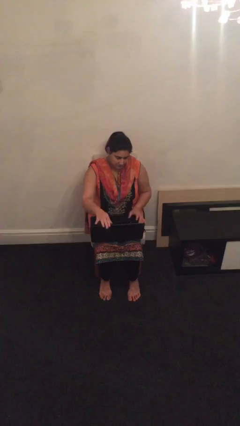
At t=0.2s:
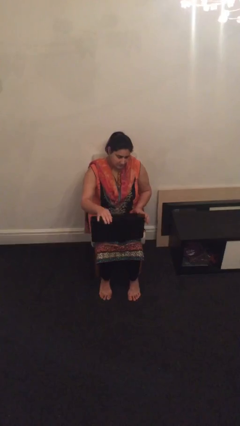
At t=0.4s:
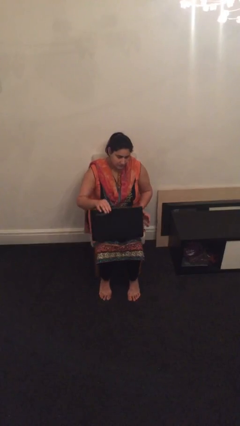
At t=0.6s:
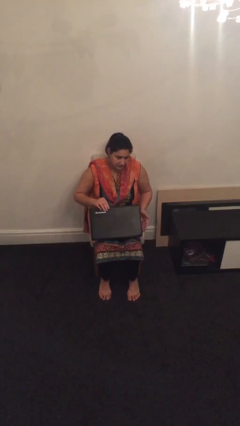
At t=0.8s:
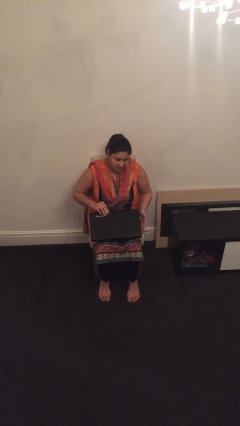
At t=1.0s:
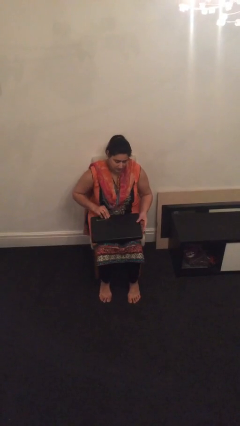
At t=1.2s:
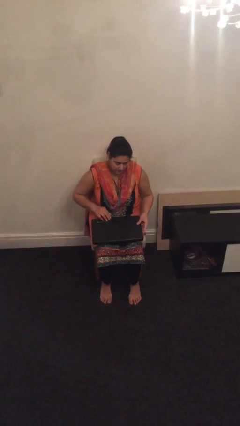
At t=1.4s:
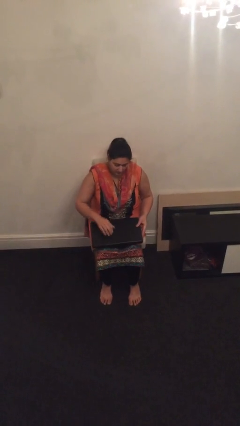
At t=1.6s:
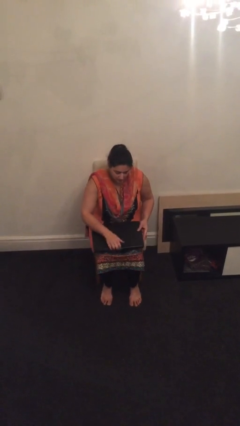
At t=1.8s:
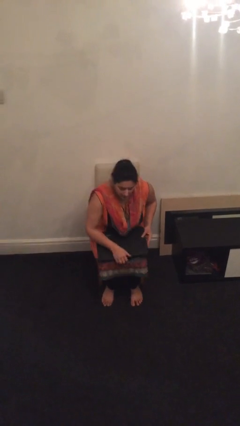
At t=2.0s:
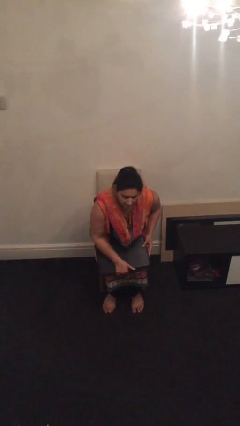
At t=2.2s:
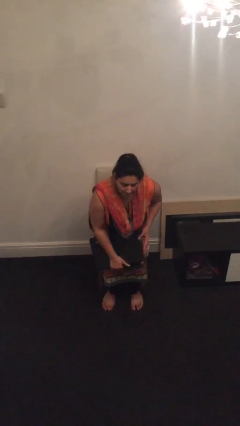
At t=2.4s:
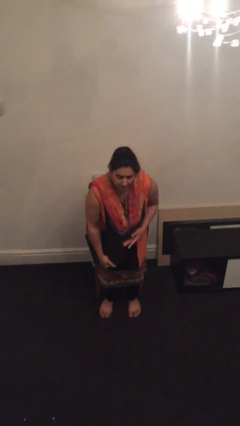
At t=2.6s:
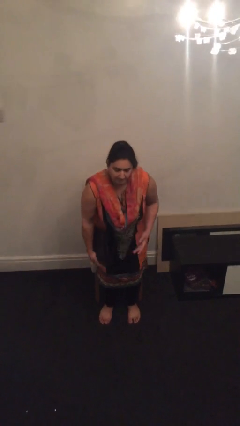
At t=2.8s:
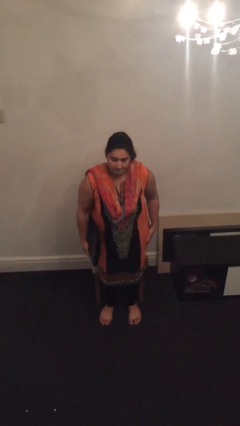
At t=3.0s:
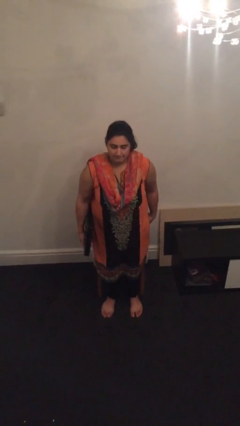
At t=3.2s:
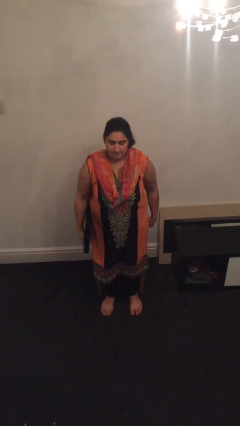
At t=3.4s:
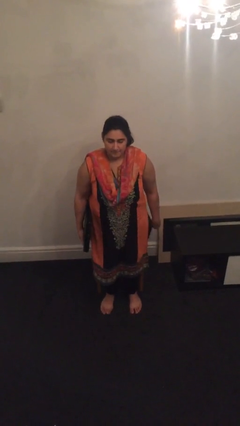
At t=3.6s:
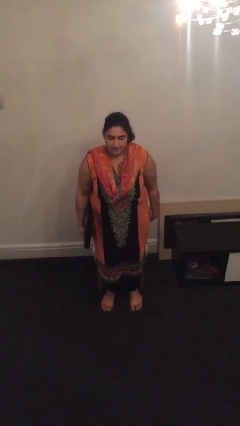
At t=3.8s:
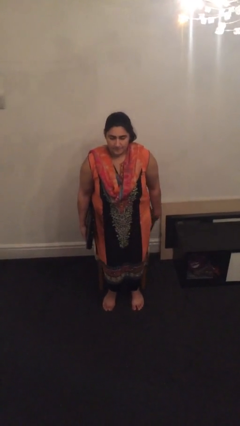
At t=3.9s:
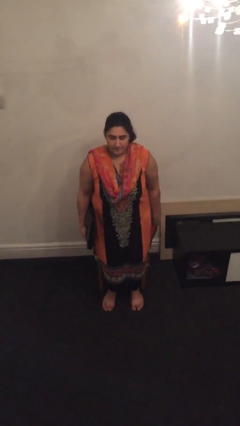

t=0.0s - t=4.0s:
person stands up

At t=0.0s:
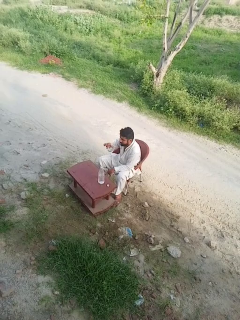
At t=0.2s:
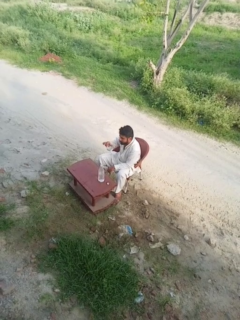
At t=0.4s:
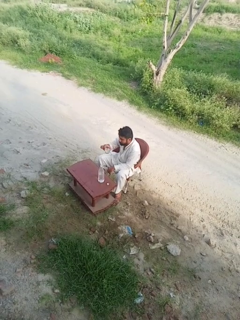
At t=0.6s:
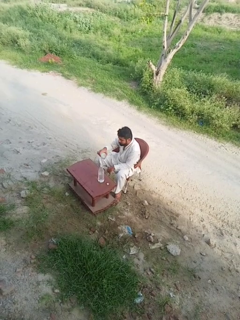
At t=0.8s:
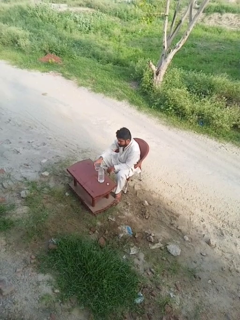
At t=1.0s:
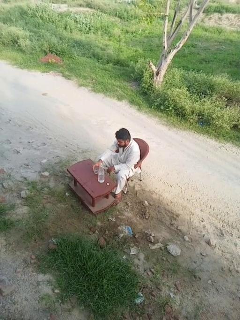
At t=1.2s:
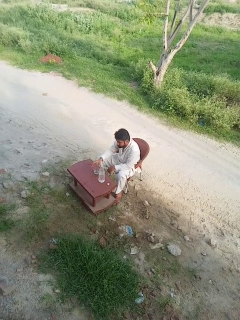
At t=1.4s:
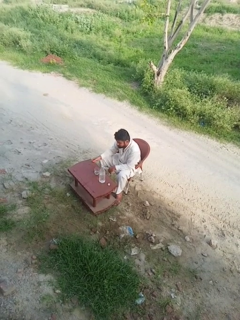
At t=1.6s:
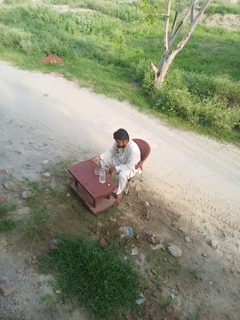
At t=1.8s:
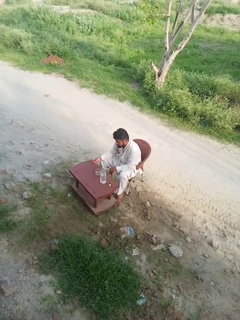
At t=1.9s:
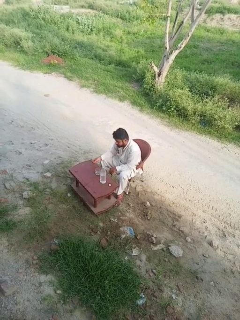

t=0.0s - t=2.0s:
person puts down object on table

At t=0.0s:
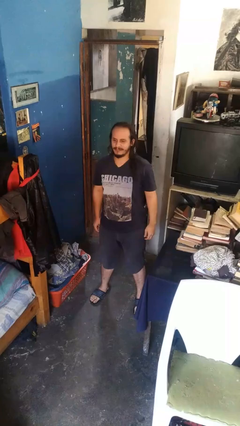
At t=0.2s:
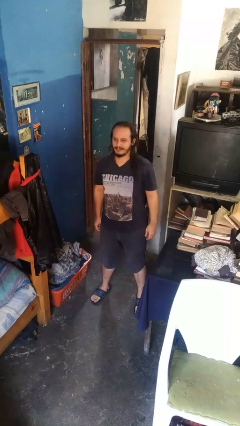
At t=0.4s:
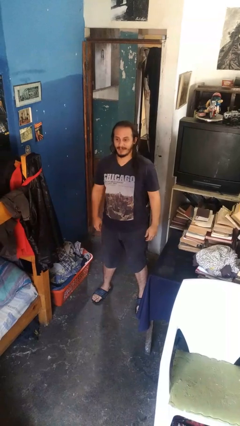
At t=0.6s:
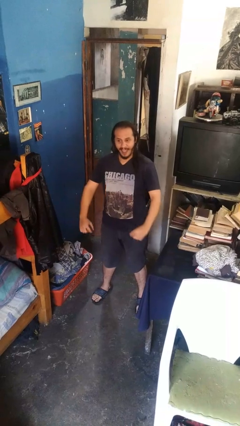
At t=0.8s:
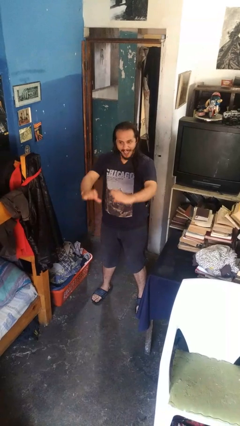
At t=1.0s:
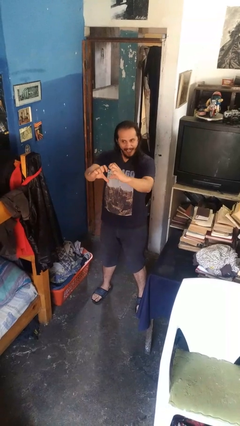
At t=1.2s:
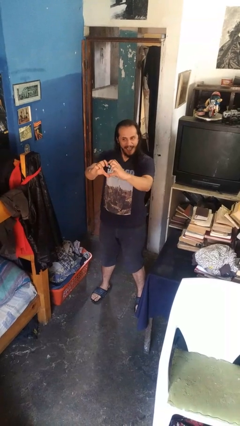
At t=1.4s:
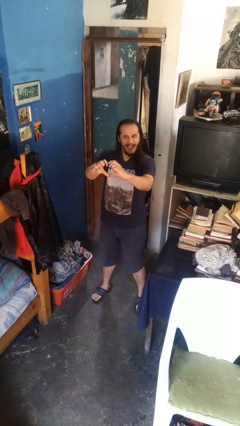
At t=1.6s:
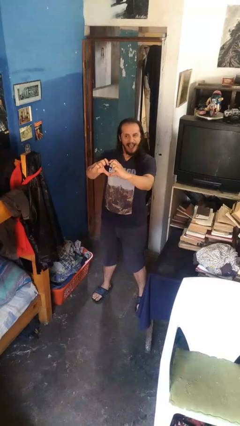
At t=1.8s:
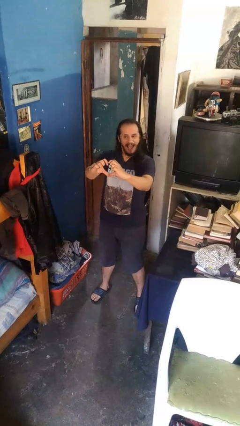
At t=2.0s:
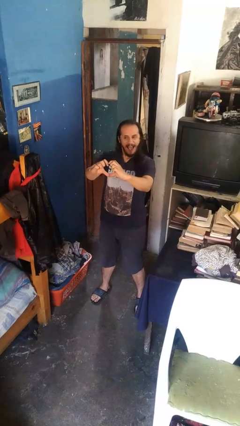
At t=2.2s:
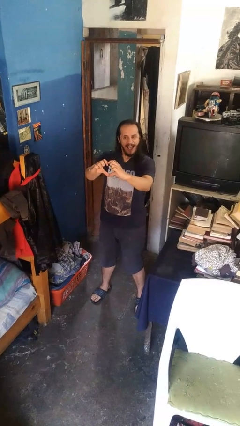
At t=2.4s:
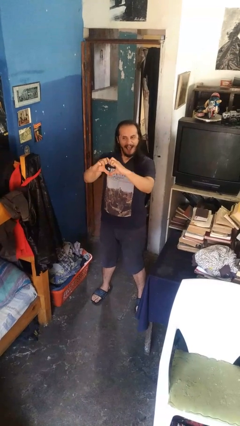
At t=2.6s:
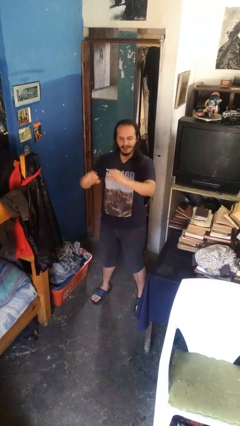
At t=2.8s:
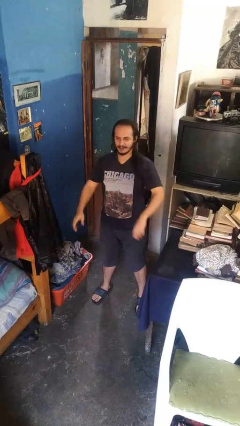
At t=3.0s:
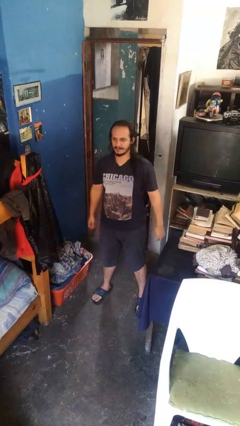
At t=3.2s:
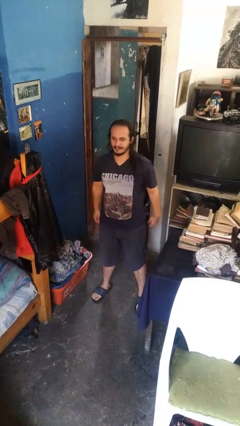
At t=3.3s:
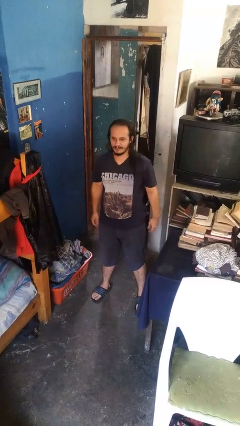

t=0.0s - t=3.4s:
person gestures heart

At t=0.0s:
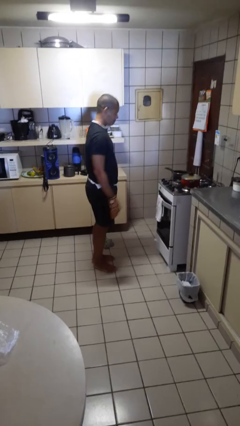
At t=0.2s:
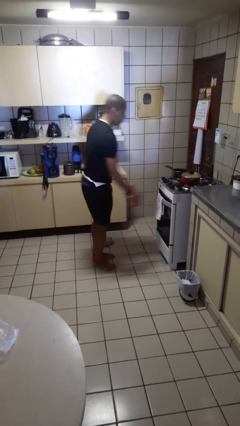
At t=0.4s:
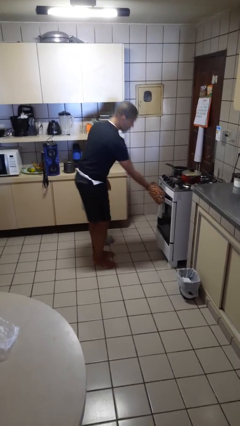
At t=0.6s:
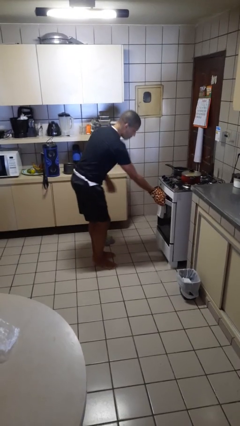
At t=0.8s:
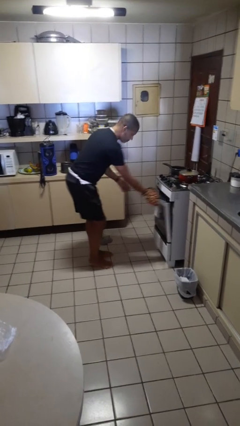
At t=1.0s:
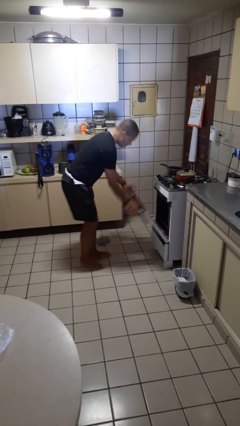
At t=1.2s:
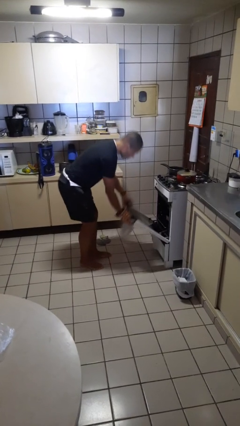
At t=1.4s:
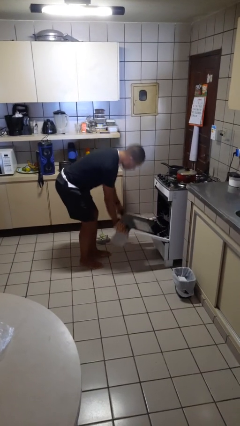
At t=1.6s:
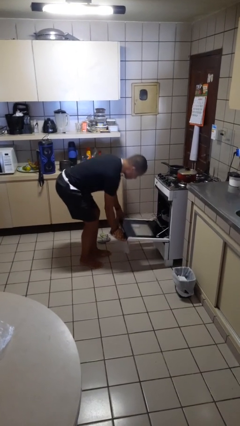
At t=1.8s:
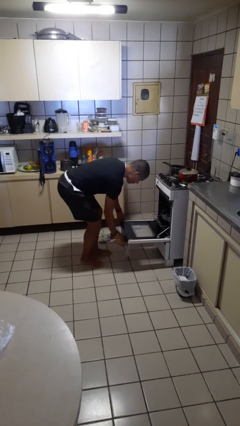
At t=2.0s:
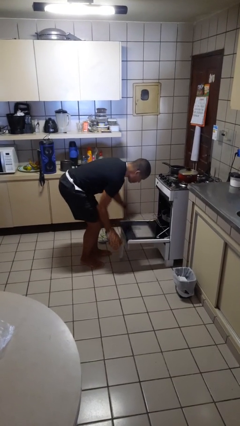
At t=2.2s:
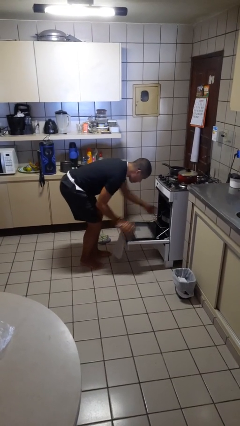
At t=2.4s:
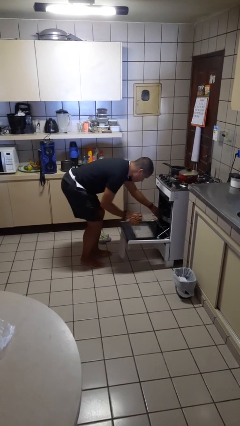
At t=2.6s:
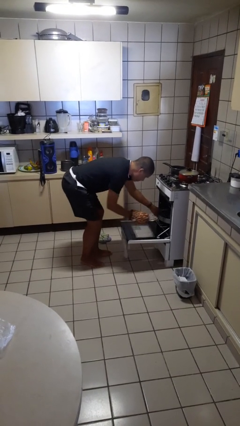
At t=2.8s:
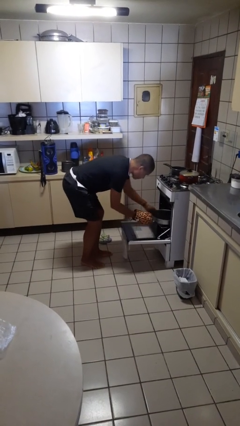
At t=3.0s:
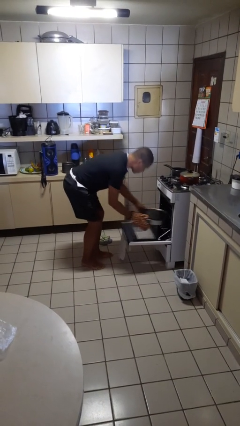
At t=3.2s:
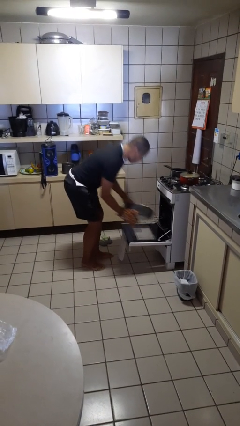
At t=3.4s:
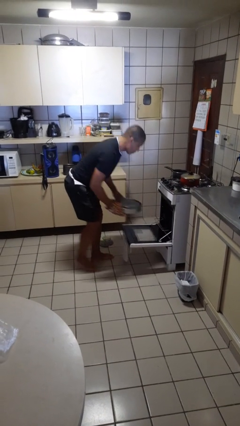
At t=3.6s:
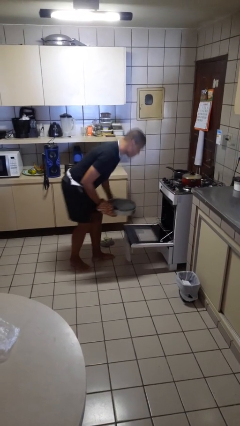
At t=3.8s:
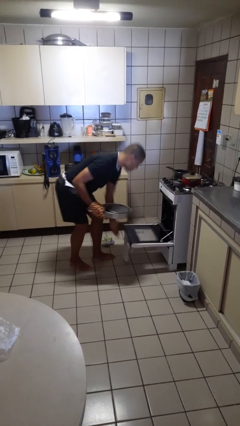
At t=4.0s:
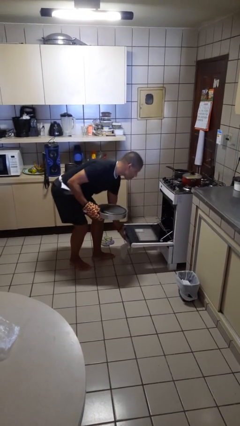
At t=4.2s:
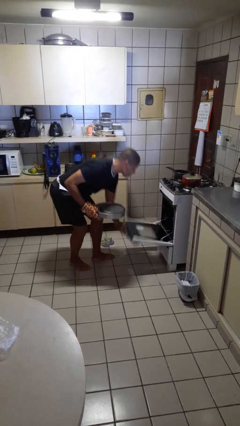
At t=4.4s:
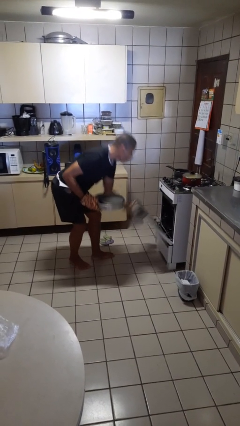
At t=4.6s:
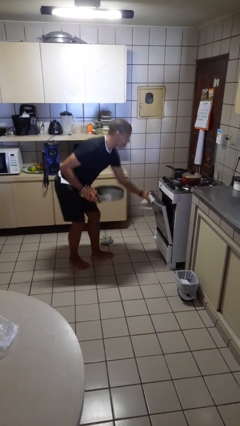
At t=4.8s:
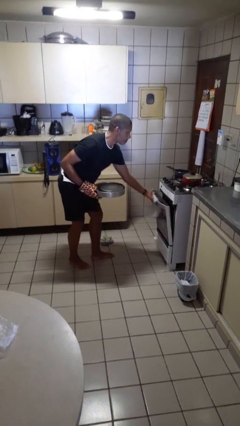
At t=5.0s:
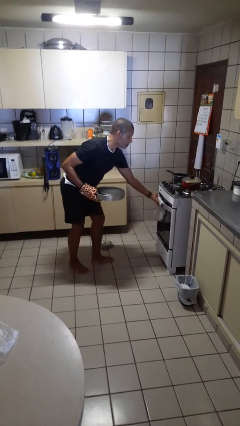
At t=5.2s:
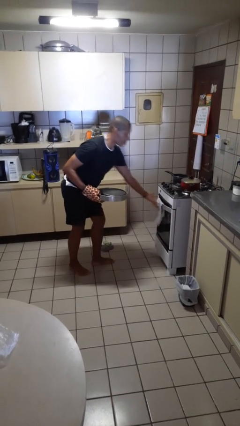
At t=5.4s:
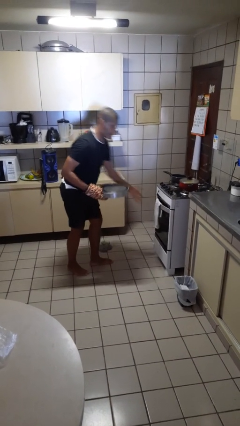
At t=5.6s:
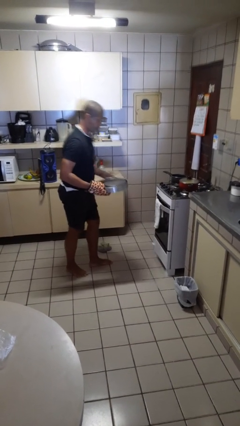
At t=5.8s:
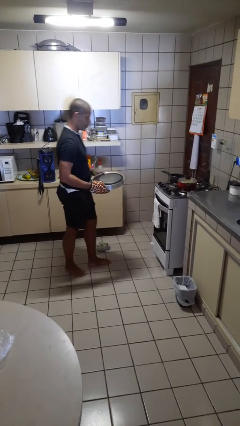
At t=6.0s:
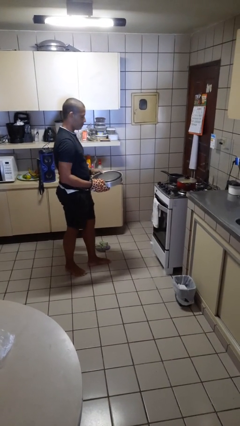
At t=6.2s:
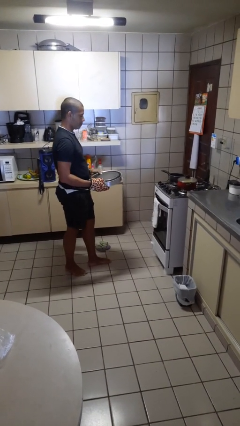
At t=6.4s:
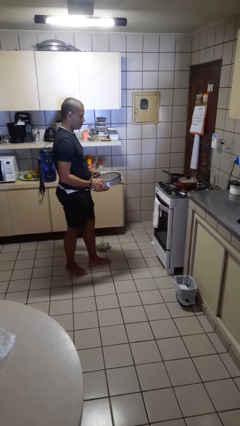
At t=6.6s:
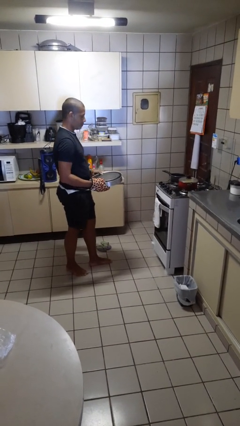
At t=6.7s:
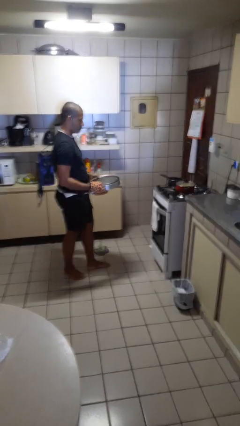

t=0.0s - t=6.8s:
person takes object from oven

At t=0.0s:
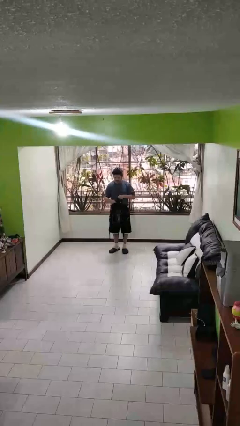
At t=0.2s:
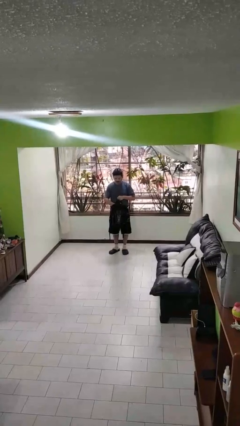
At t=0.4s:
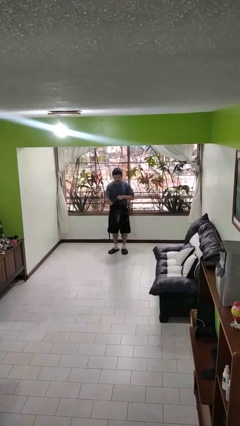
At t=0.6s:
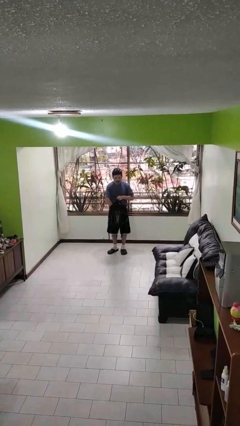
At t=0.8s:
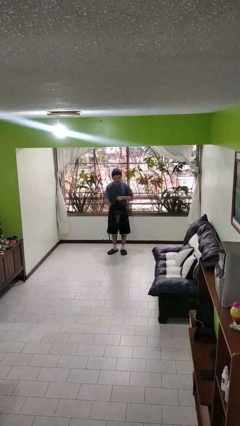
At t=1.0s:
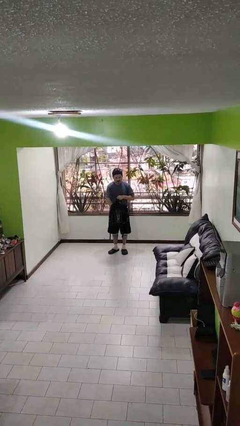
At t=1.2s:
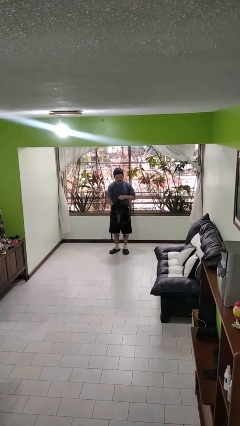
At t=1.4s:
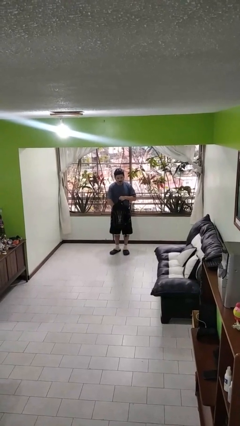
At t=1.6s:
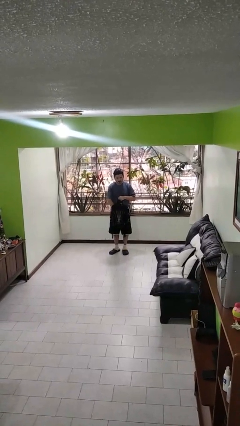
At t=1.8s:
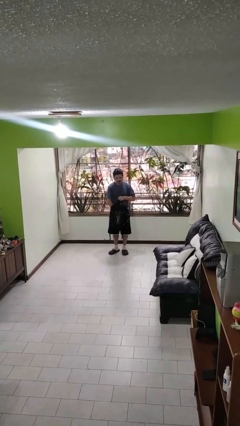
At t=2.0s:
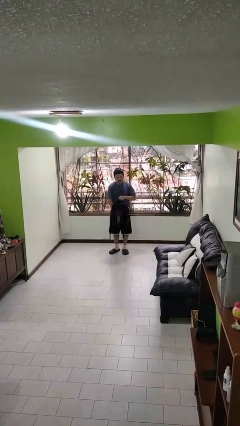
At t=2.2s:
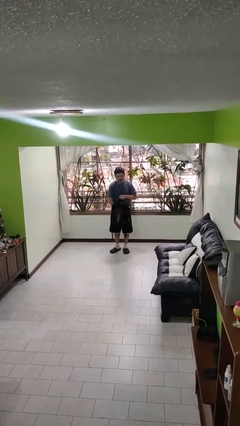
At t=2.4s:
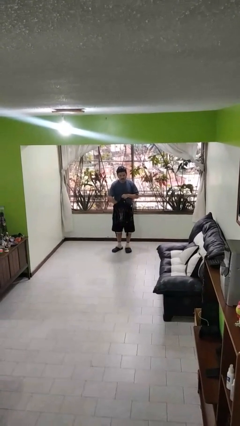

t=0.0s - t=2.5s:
person searches in backpack
